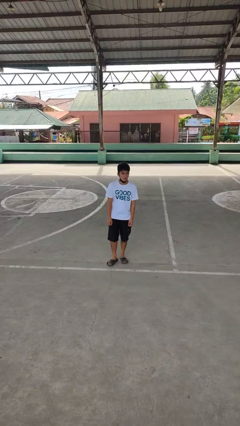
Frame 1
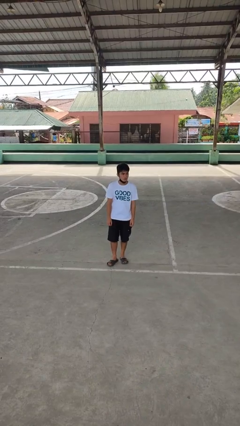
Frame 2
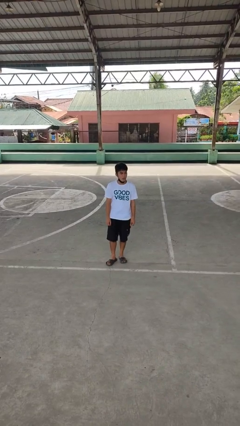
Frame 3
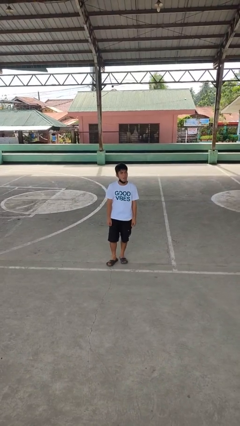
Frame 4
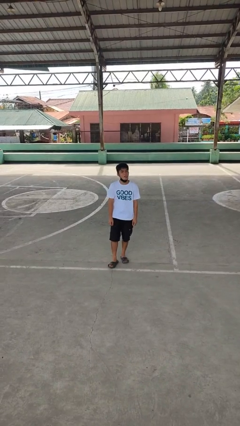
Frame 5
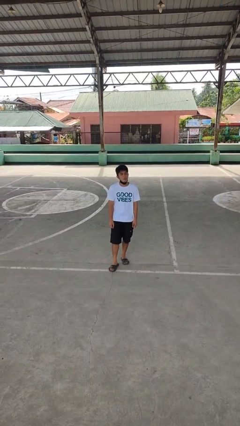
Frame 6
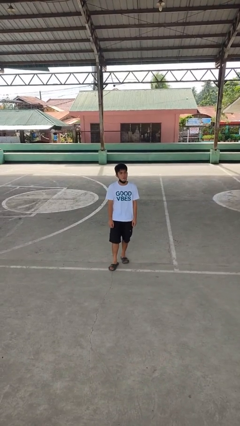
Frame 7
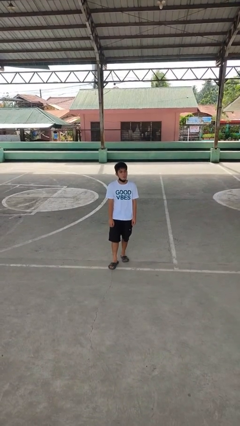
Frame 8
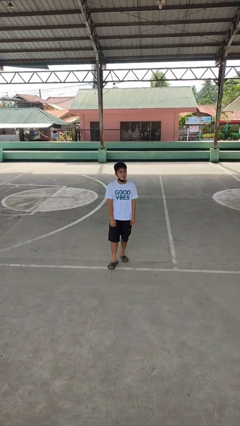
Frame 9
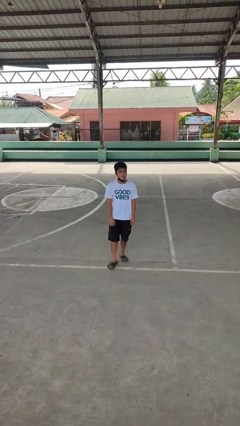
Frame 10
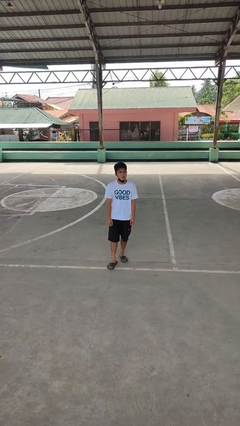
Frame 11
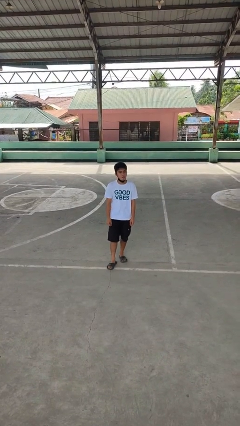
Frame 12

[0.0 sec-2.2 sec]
person sticks out tongue

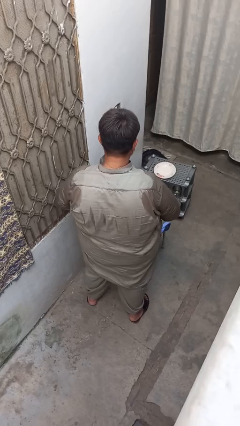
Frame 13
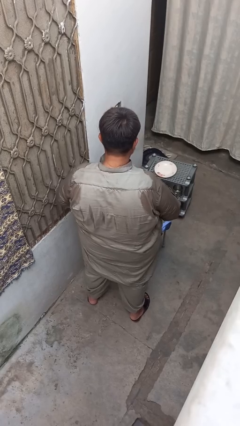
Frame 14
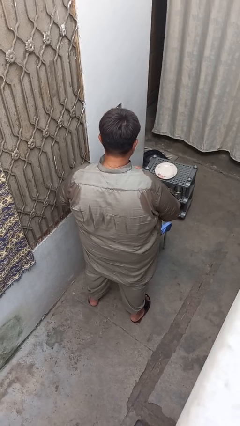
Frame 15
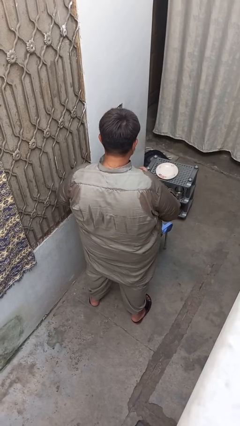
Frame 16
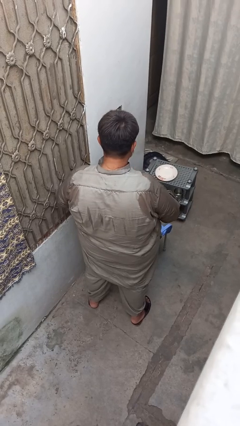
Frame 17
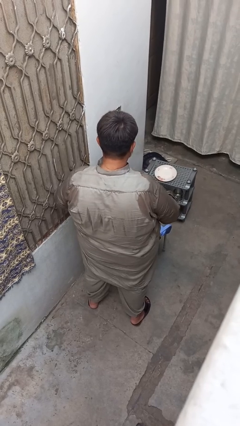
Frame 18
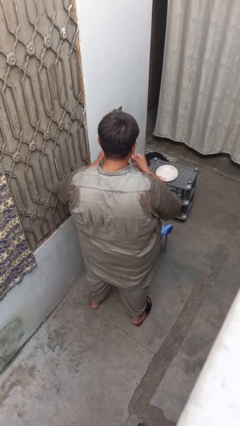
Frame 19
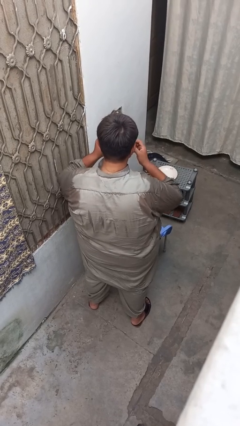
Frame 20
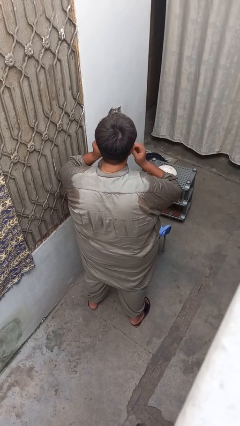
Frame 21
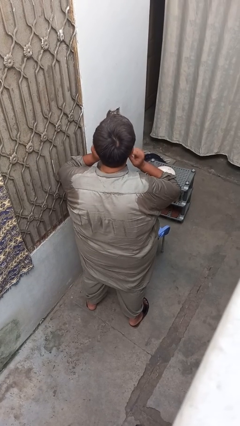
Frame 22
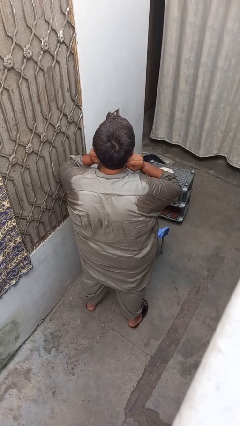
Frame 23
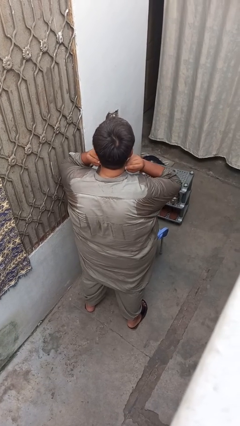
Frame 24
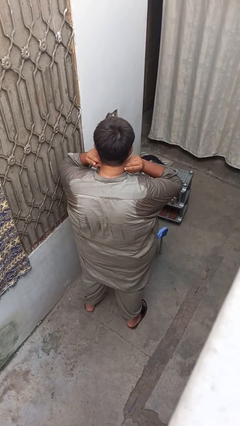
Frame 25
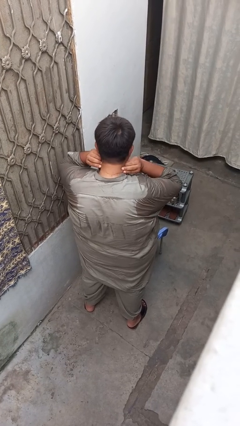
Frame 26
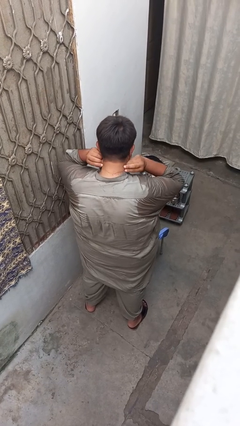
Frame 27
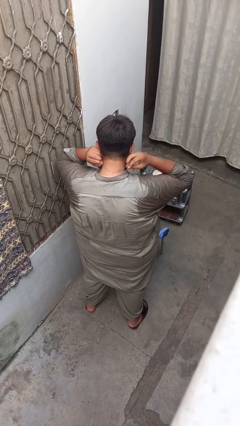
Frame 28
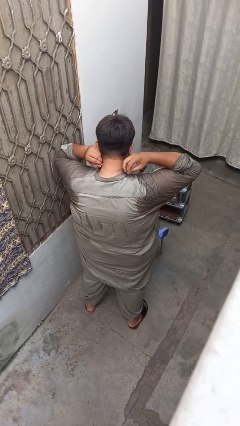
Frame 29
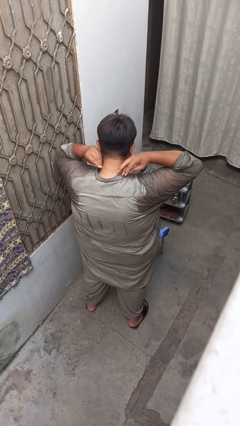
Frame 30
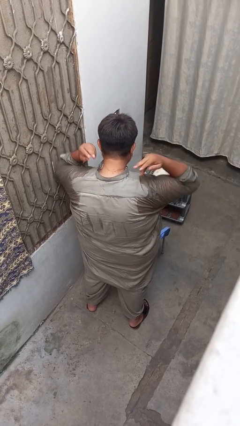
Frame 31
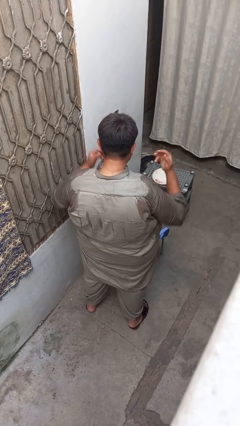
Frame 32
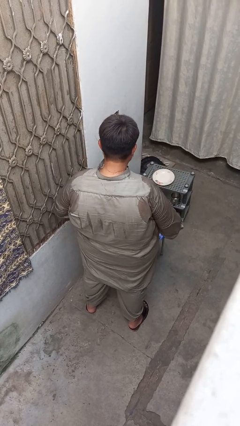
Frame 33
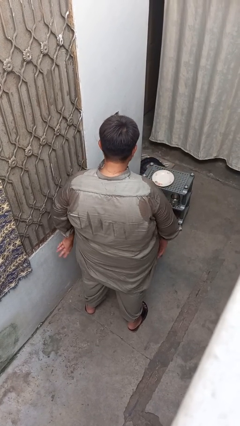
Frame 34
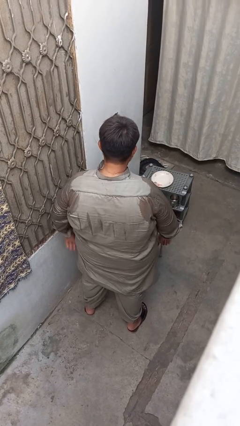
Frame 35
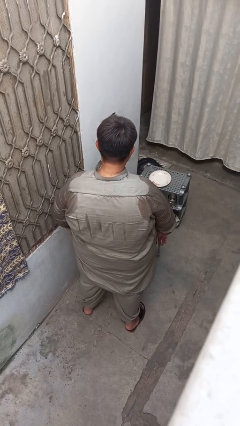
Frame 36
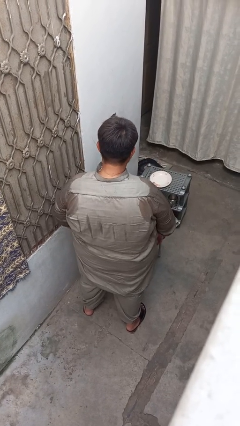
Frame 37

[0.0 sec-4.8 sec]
person puts on necklace

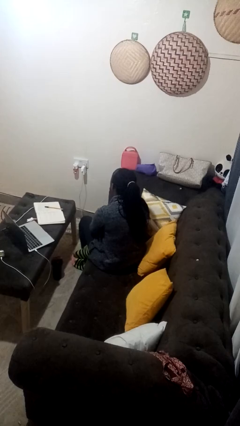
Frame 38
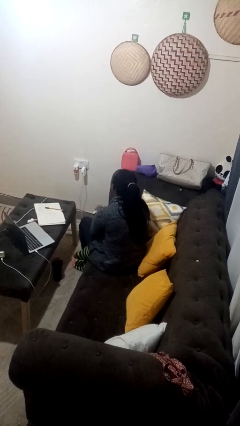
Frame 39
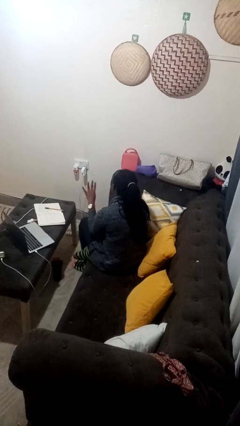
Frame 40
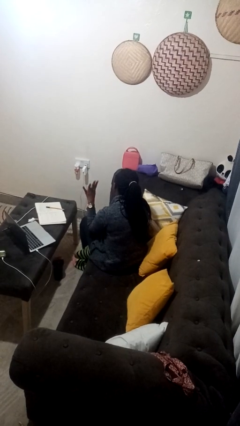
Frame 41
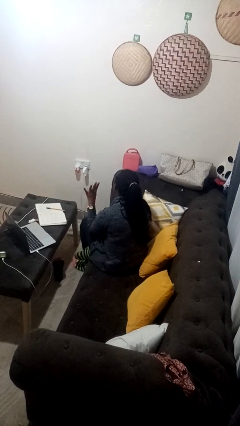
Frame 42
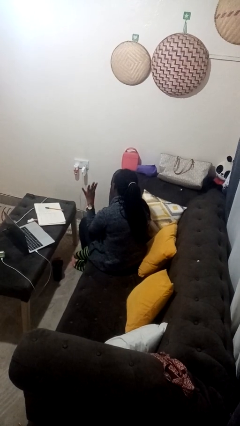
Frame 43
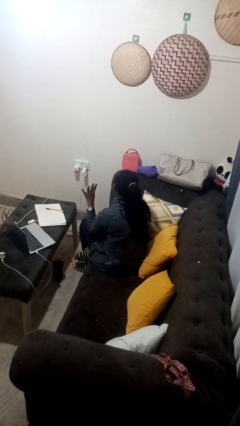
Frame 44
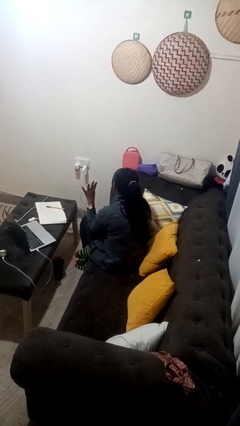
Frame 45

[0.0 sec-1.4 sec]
person gestures number four

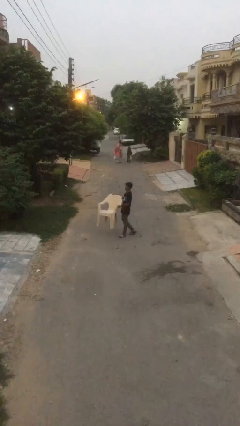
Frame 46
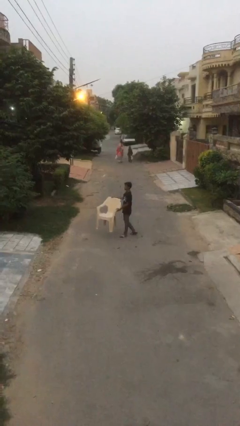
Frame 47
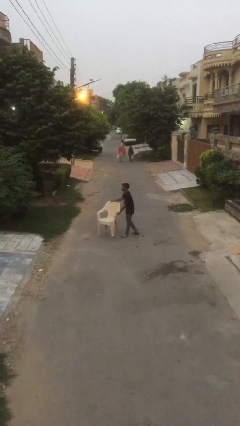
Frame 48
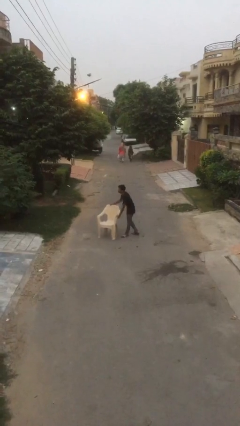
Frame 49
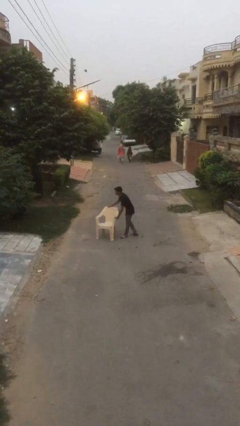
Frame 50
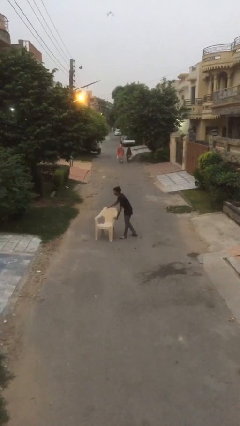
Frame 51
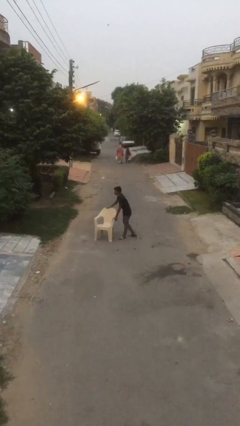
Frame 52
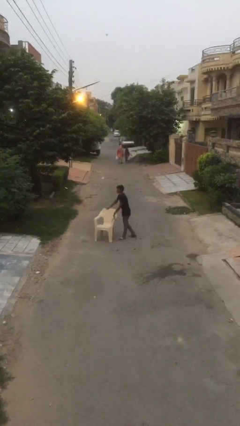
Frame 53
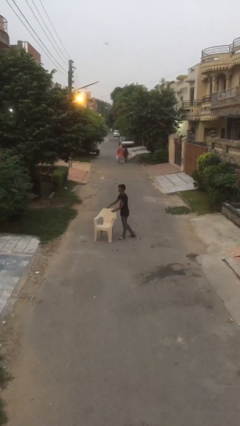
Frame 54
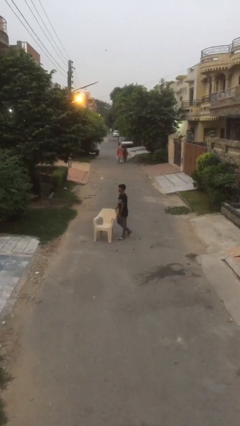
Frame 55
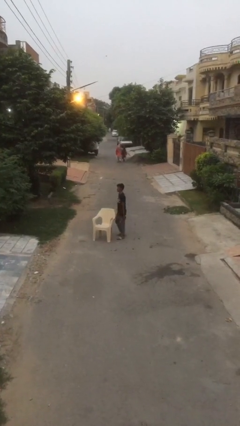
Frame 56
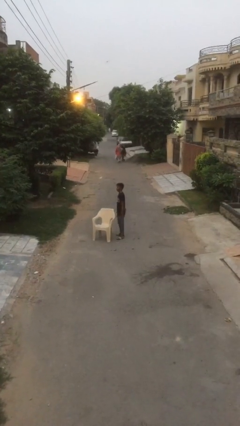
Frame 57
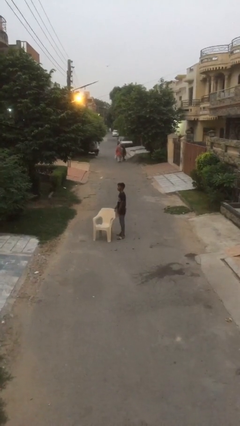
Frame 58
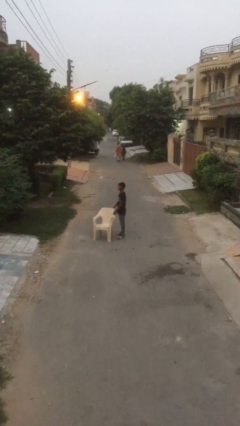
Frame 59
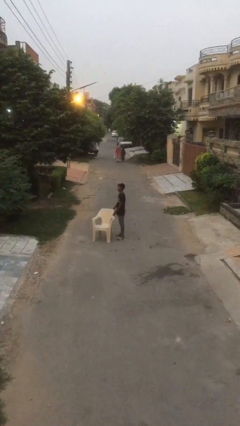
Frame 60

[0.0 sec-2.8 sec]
person puts down object on floor

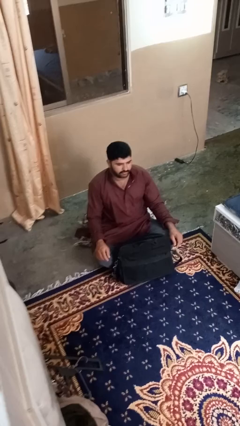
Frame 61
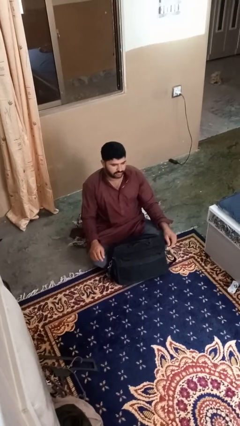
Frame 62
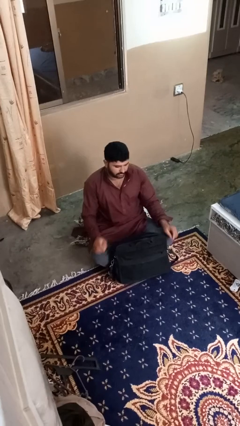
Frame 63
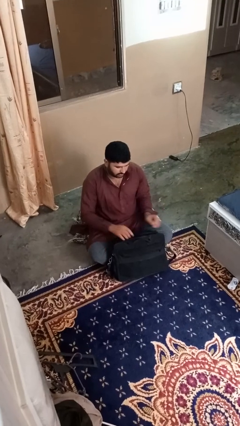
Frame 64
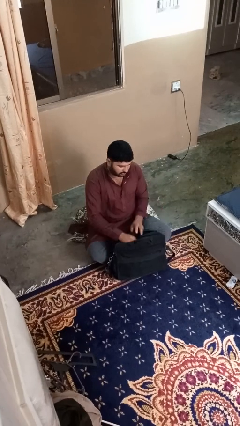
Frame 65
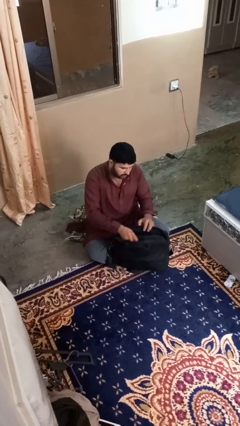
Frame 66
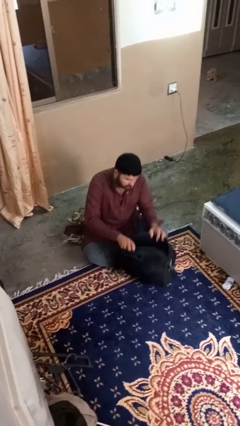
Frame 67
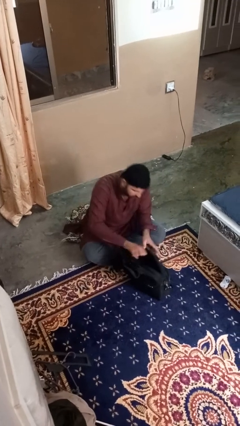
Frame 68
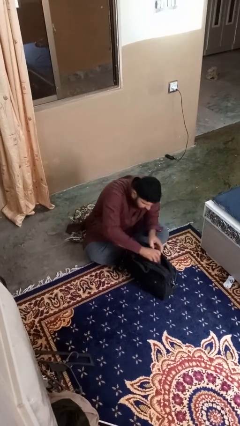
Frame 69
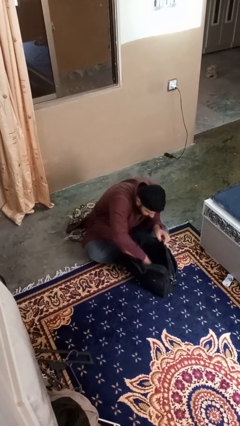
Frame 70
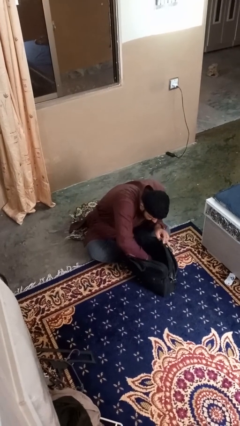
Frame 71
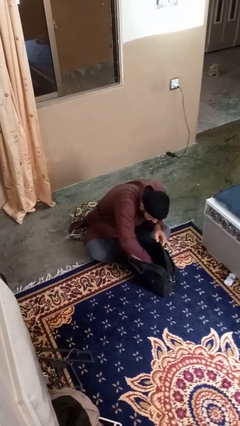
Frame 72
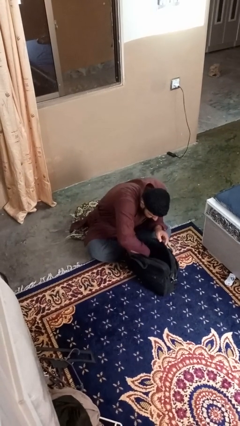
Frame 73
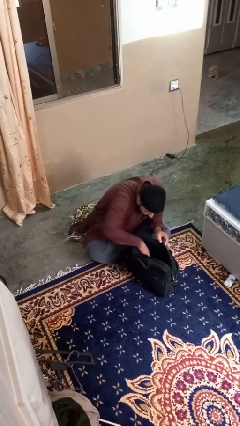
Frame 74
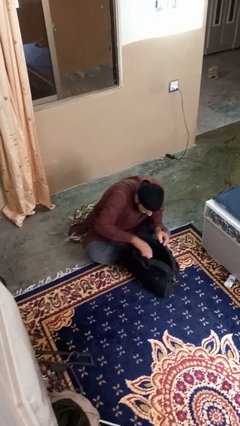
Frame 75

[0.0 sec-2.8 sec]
person searches in bag

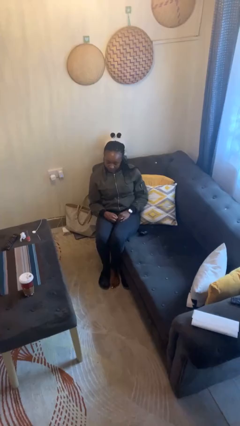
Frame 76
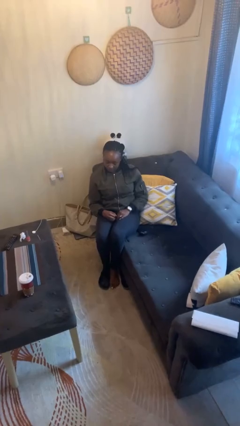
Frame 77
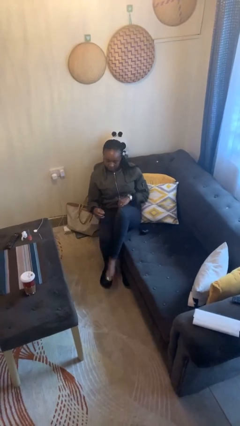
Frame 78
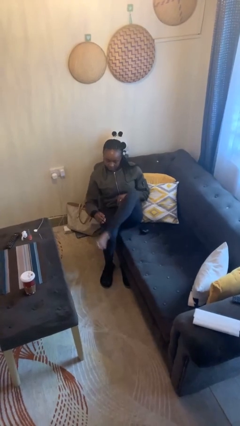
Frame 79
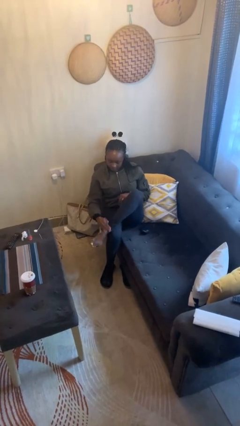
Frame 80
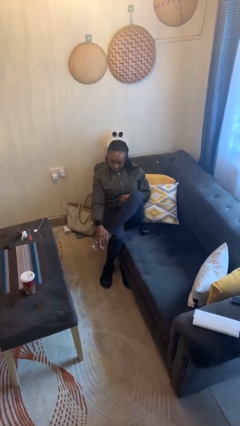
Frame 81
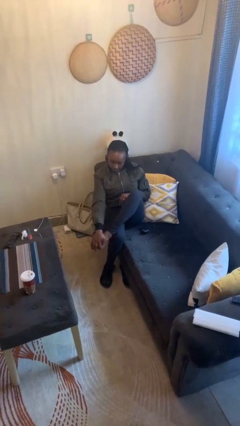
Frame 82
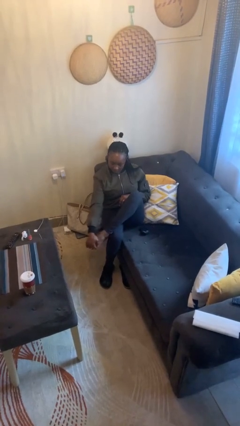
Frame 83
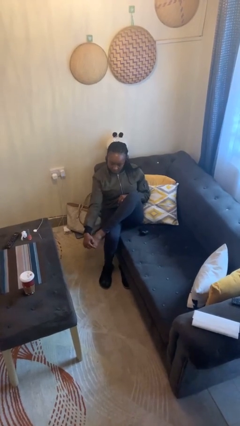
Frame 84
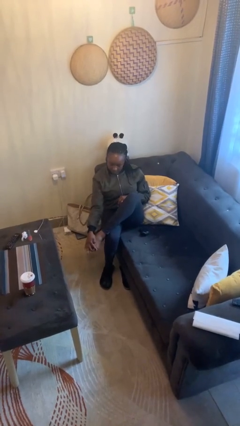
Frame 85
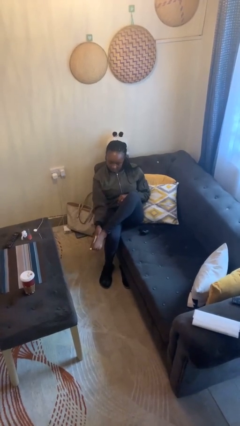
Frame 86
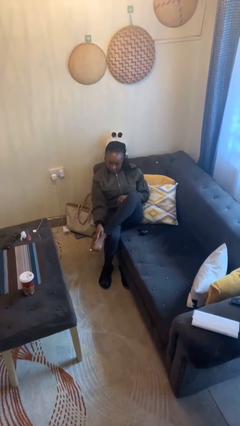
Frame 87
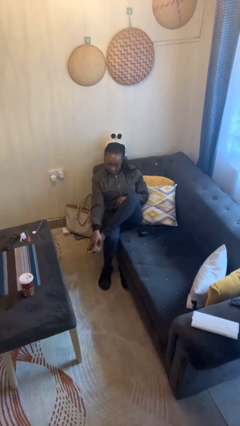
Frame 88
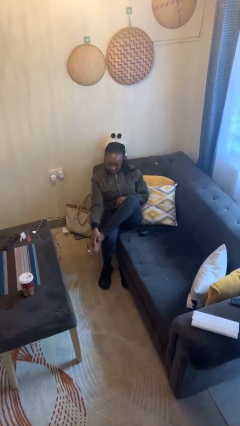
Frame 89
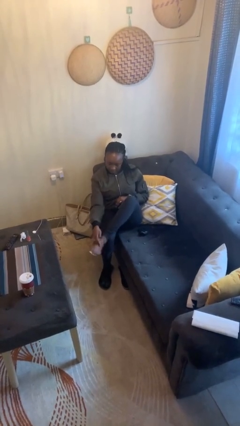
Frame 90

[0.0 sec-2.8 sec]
person rubs foot

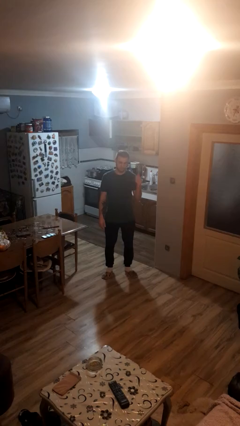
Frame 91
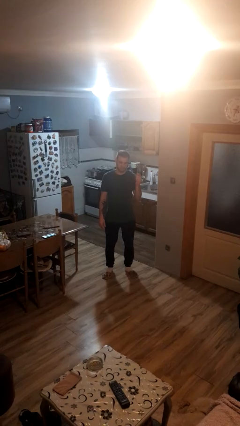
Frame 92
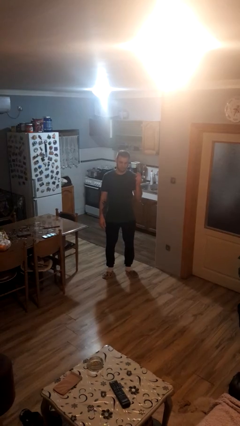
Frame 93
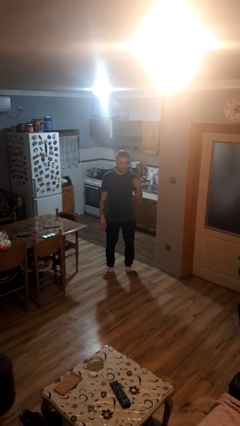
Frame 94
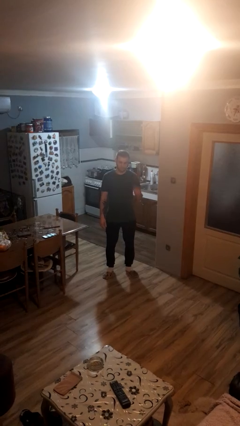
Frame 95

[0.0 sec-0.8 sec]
person snaps fingers
